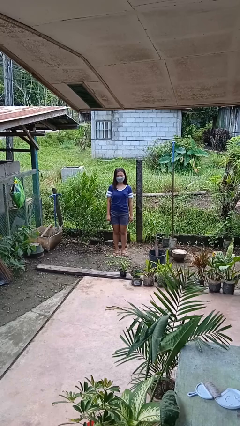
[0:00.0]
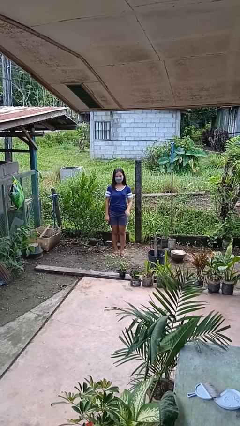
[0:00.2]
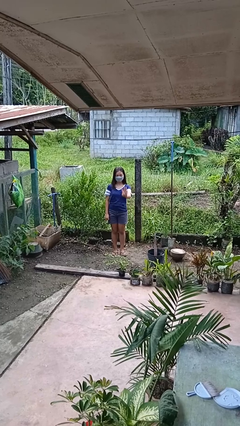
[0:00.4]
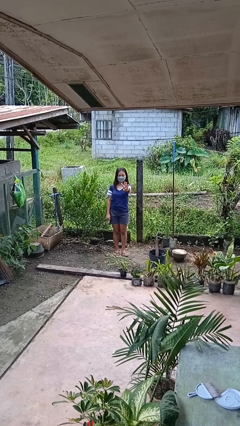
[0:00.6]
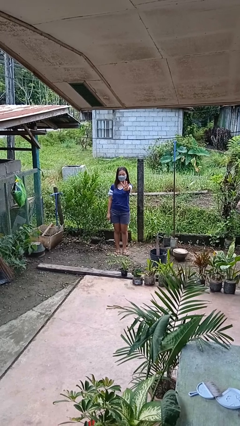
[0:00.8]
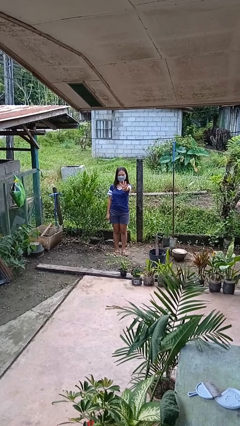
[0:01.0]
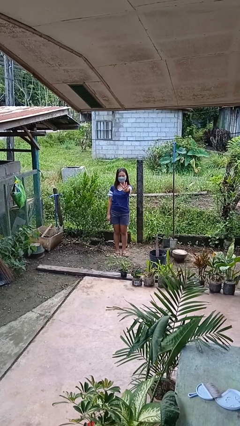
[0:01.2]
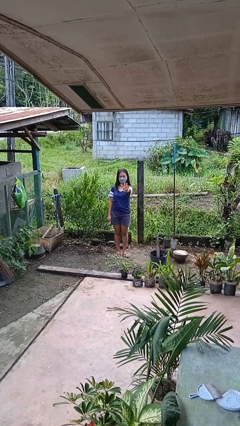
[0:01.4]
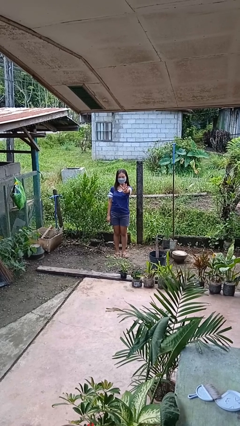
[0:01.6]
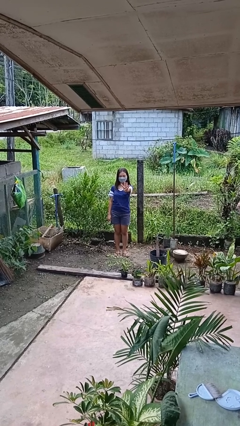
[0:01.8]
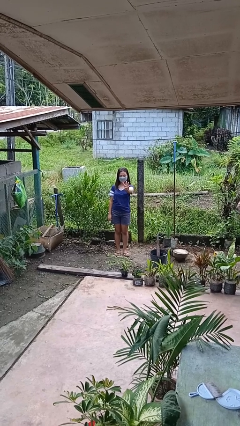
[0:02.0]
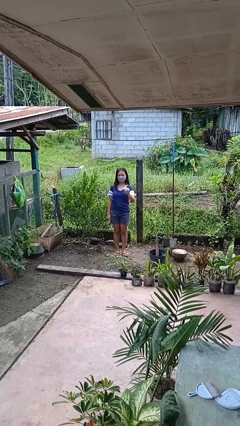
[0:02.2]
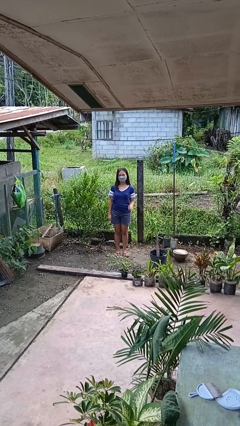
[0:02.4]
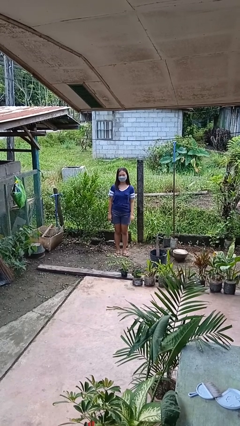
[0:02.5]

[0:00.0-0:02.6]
person gestures number four

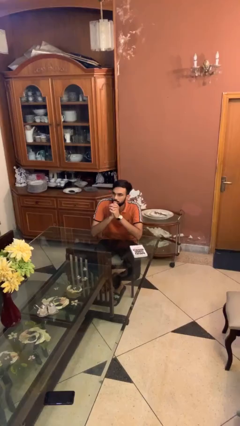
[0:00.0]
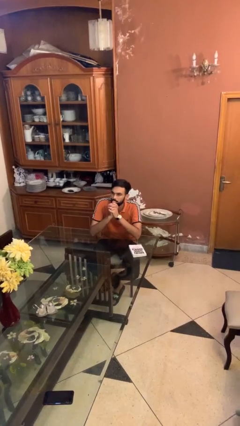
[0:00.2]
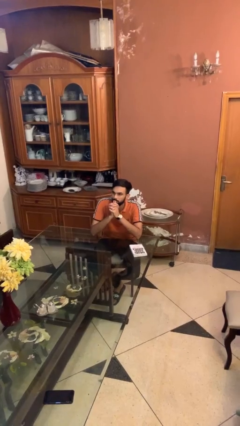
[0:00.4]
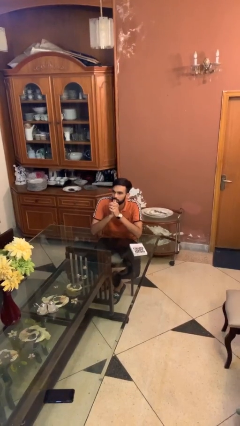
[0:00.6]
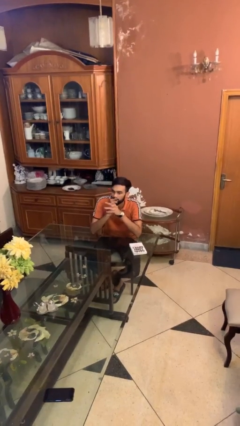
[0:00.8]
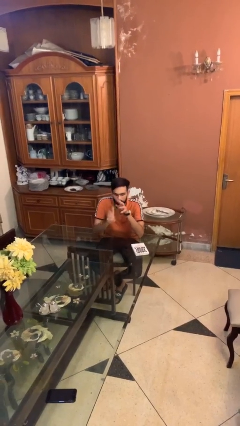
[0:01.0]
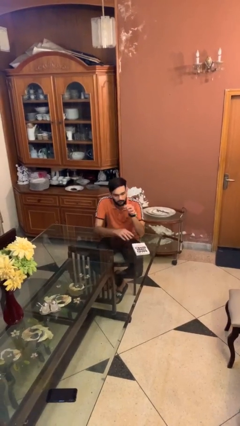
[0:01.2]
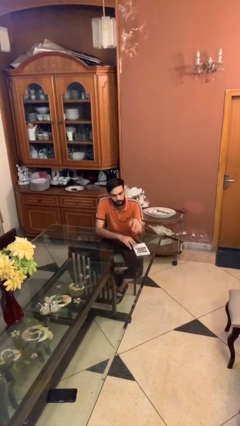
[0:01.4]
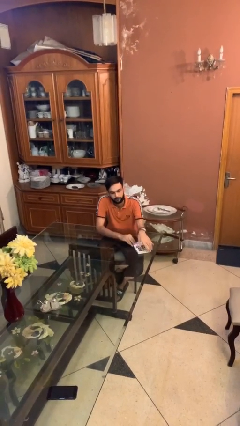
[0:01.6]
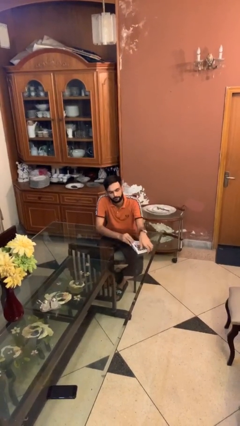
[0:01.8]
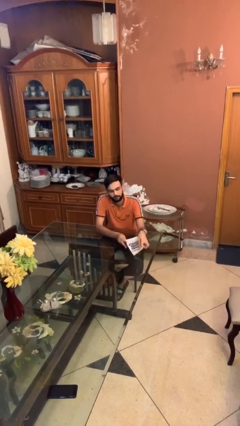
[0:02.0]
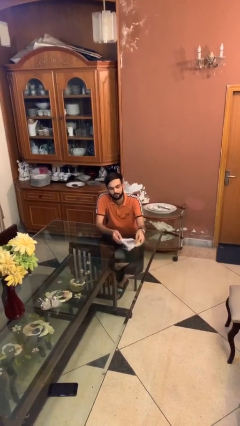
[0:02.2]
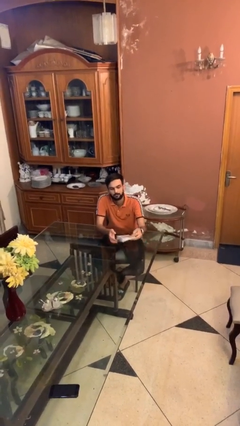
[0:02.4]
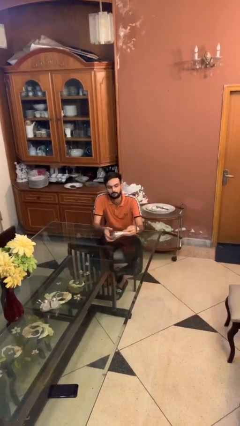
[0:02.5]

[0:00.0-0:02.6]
person picks up object from table

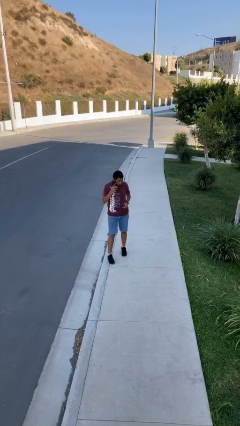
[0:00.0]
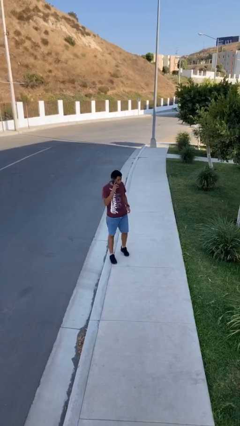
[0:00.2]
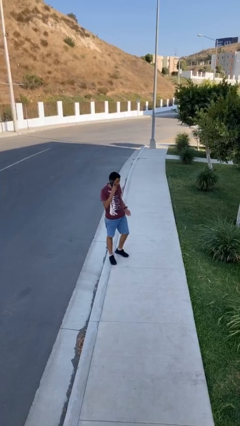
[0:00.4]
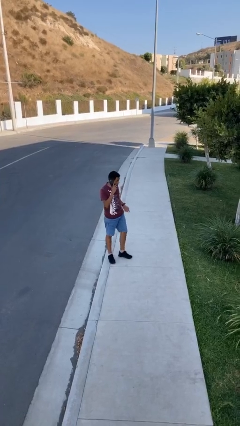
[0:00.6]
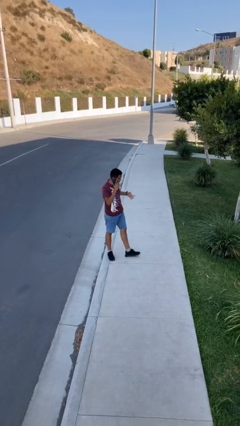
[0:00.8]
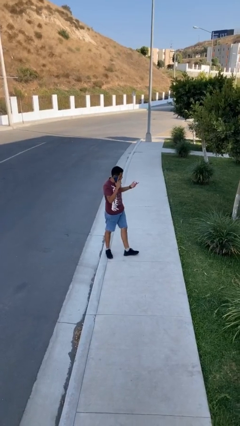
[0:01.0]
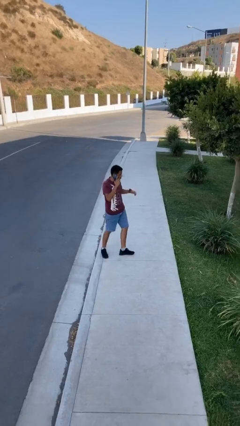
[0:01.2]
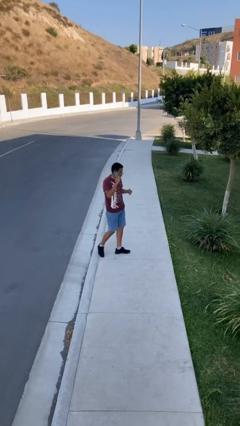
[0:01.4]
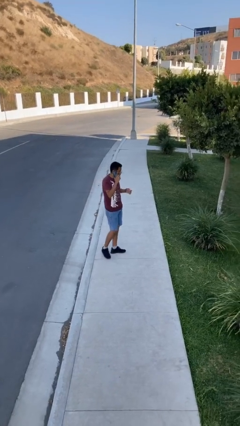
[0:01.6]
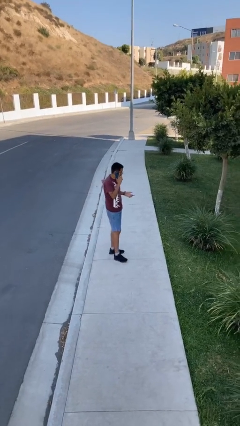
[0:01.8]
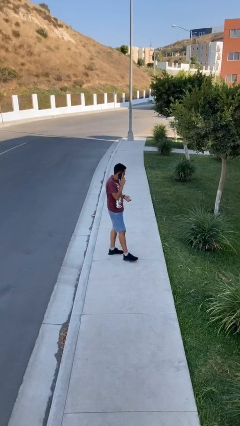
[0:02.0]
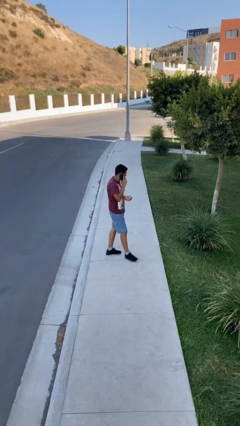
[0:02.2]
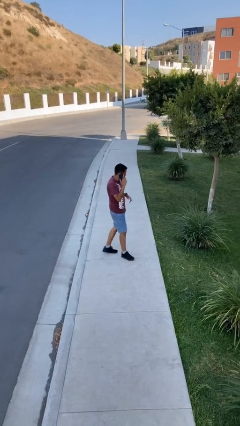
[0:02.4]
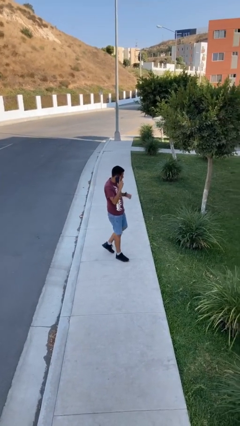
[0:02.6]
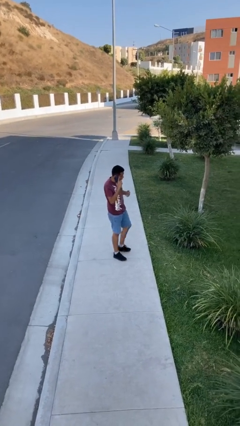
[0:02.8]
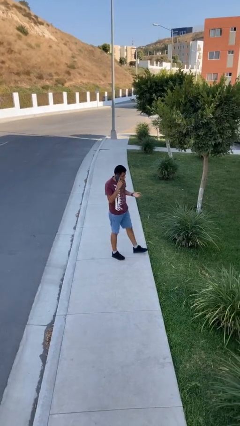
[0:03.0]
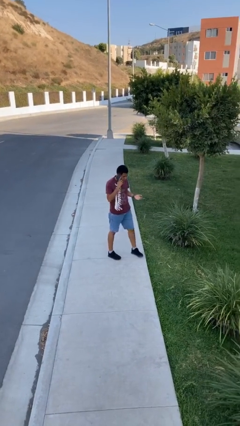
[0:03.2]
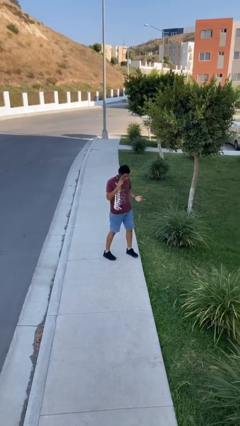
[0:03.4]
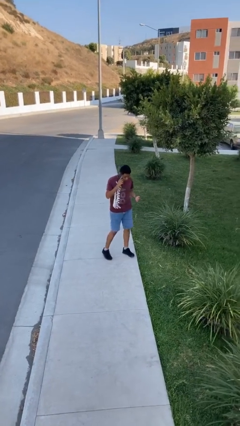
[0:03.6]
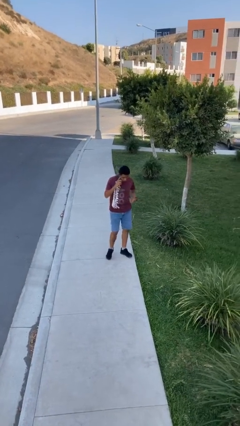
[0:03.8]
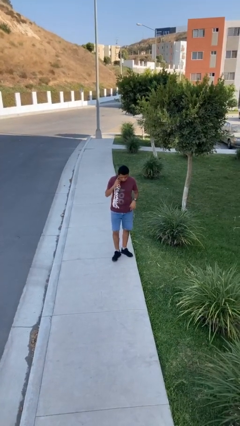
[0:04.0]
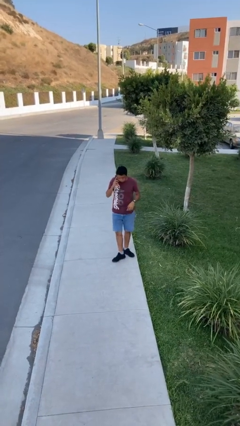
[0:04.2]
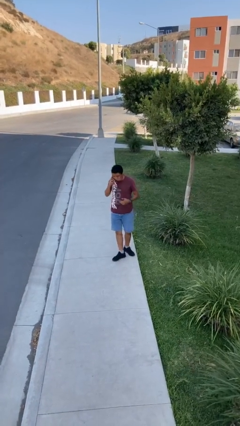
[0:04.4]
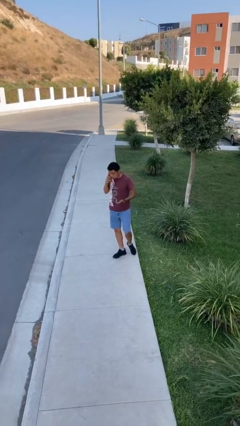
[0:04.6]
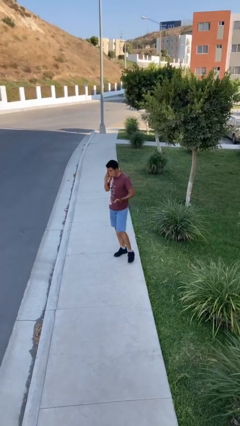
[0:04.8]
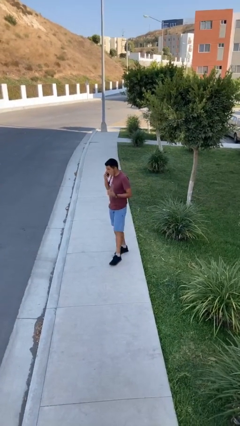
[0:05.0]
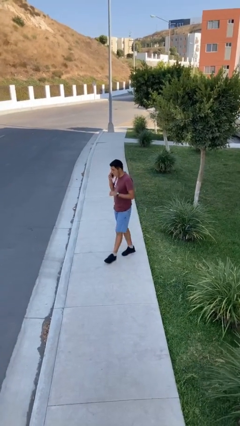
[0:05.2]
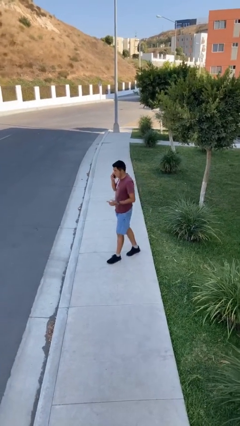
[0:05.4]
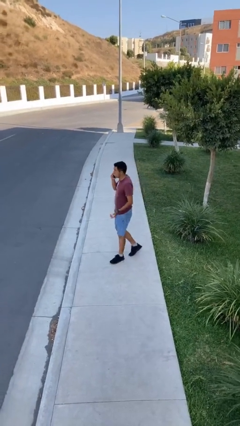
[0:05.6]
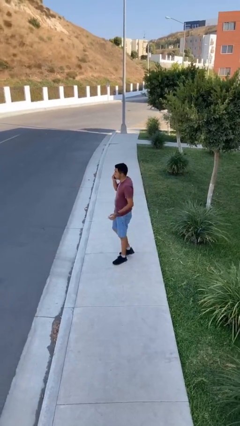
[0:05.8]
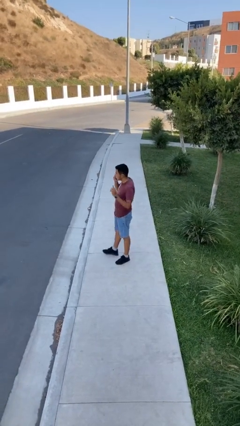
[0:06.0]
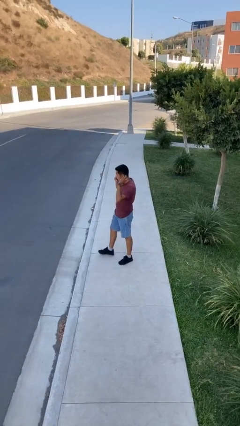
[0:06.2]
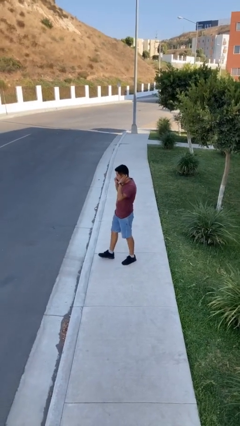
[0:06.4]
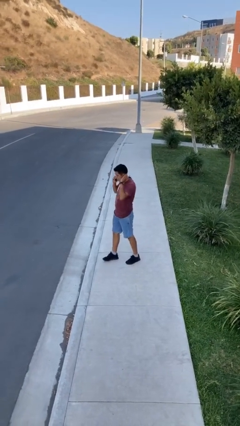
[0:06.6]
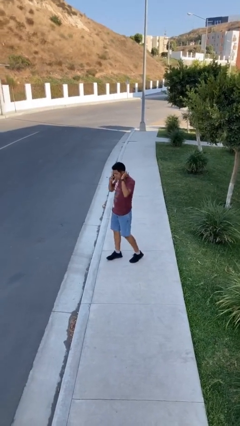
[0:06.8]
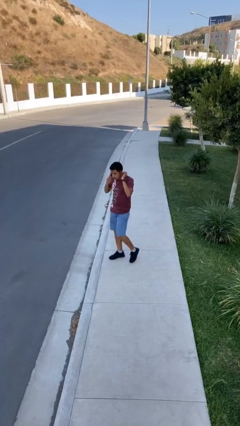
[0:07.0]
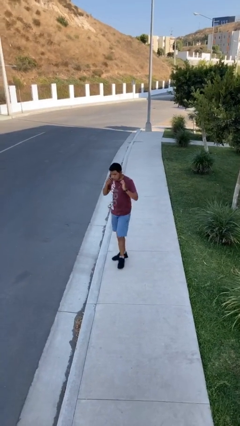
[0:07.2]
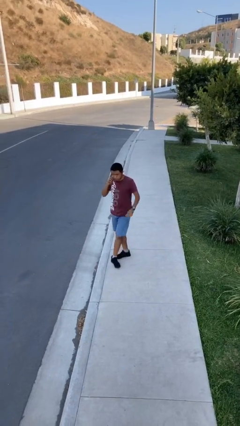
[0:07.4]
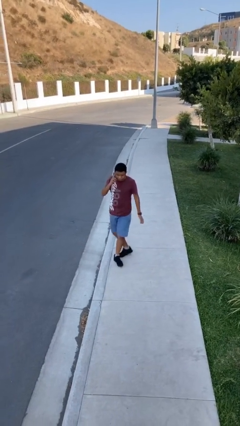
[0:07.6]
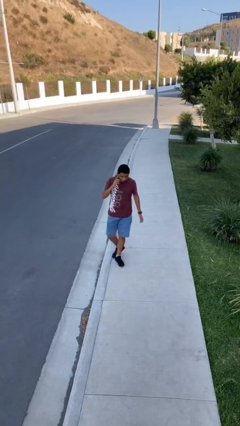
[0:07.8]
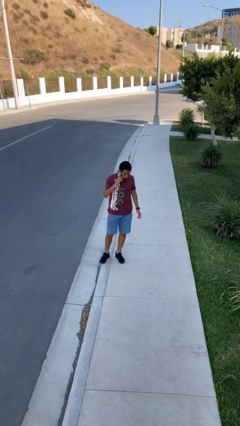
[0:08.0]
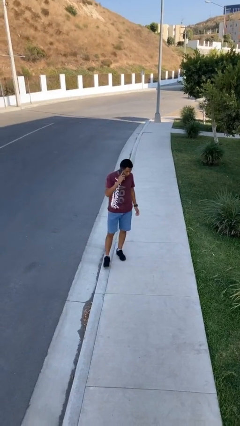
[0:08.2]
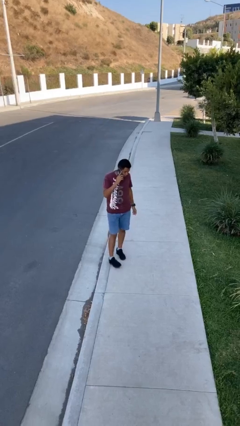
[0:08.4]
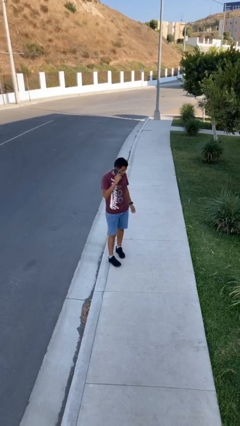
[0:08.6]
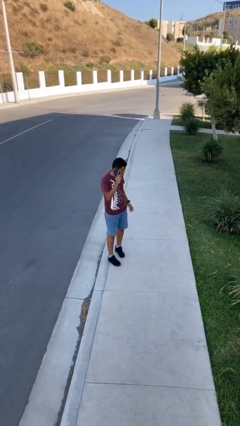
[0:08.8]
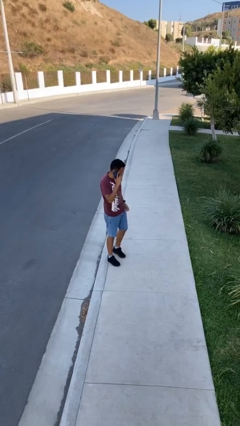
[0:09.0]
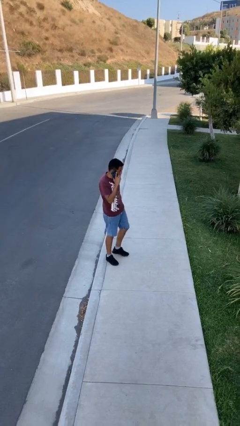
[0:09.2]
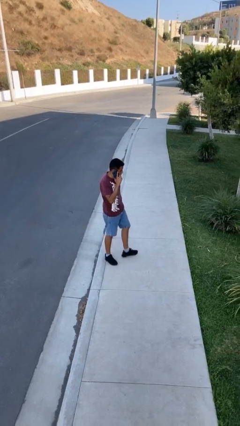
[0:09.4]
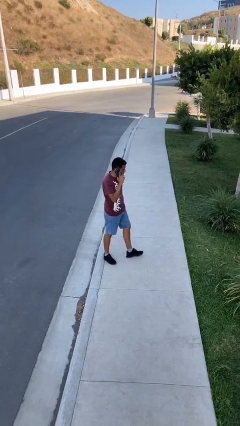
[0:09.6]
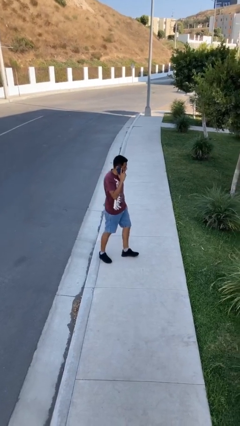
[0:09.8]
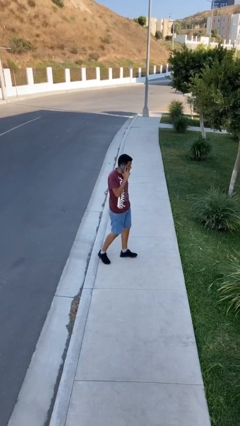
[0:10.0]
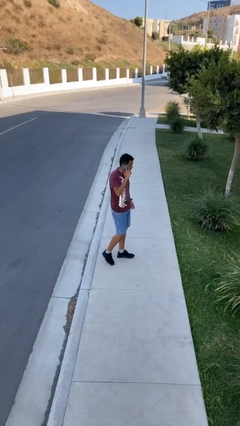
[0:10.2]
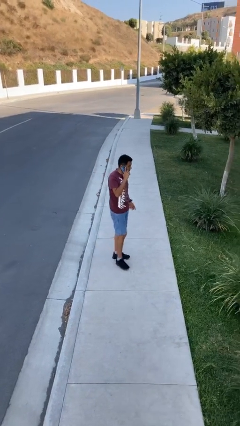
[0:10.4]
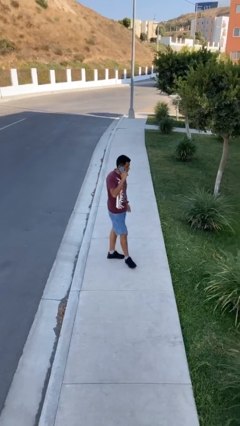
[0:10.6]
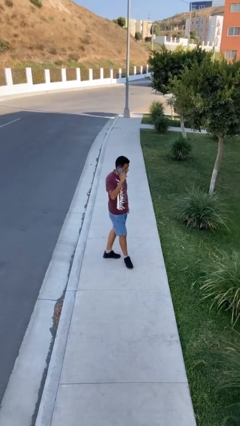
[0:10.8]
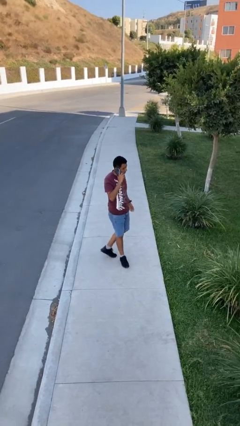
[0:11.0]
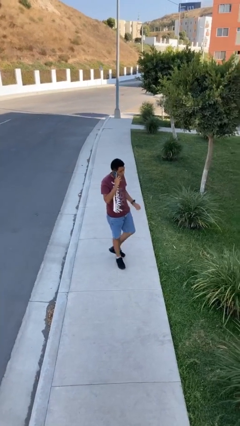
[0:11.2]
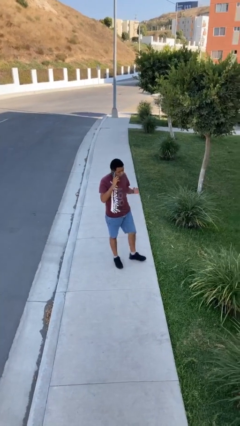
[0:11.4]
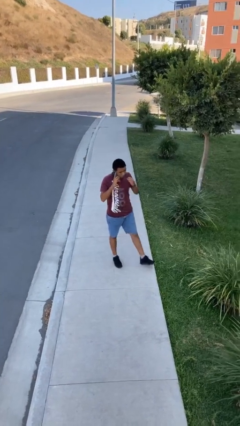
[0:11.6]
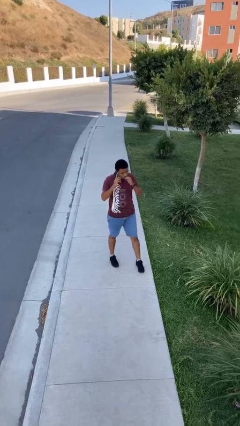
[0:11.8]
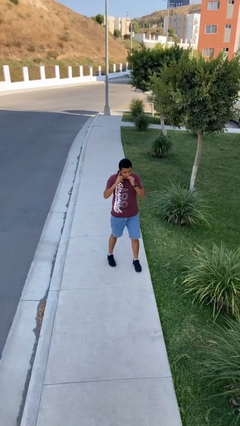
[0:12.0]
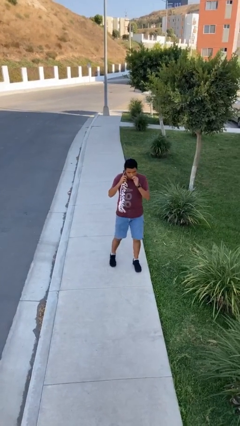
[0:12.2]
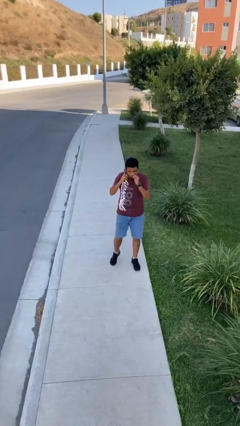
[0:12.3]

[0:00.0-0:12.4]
person talks on phone

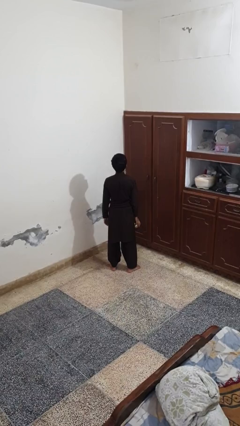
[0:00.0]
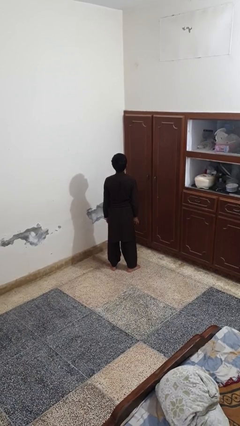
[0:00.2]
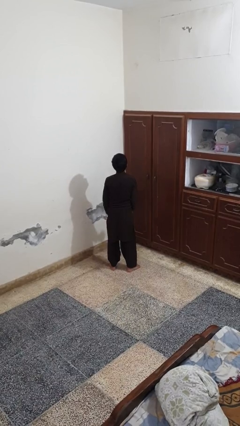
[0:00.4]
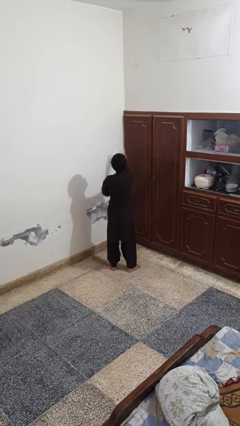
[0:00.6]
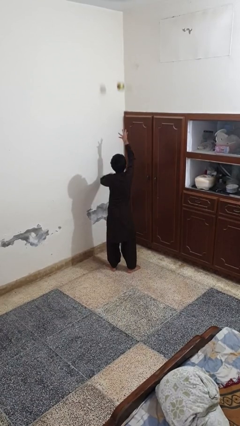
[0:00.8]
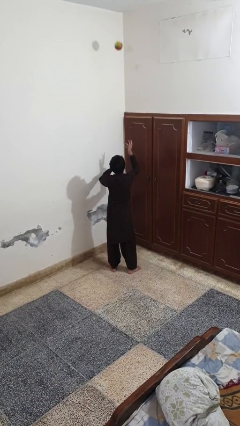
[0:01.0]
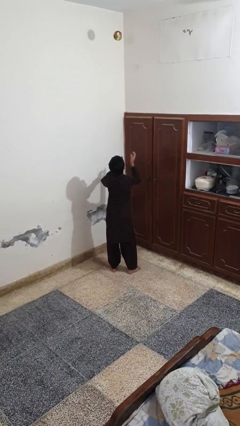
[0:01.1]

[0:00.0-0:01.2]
person drops object
